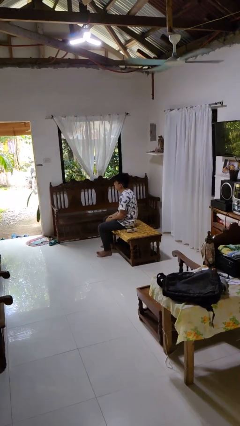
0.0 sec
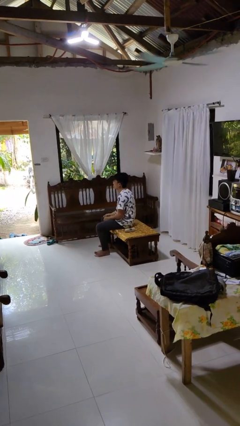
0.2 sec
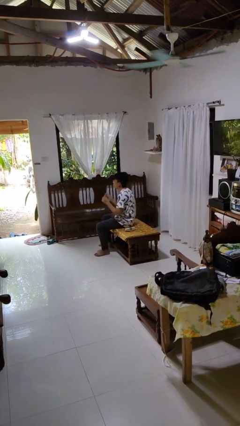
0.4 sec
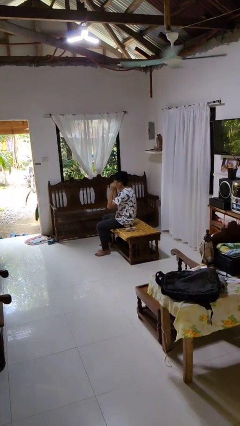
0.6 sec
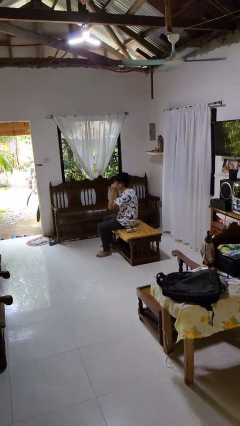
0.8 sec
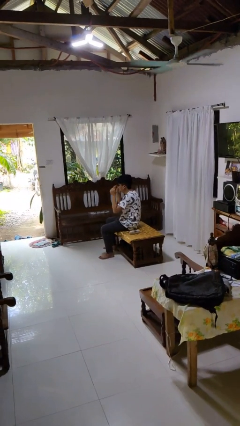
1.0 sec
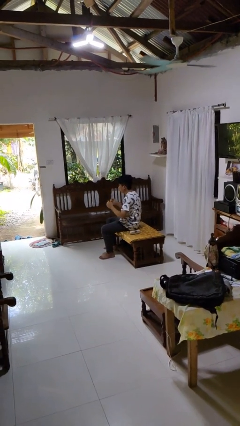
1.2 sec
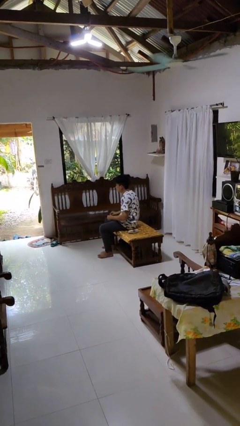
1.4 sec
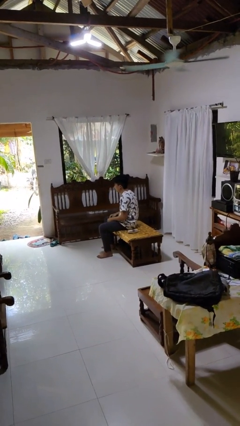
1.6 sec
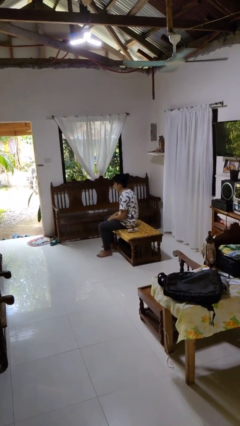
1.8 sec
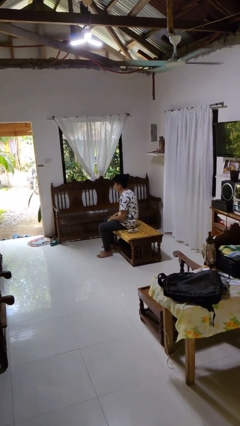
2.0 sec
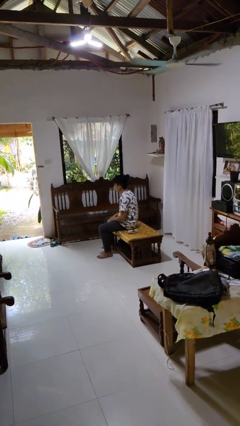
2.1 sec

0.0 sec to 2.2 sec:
person takes off glasses

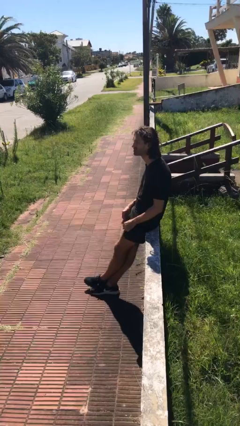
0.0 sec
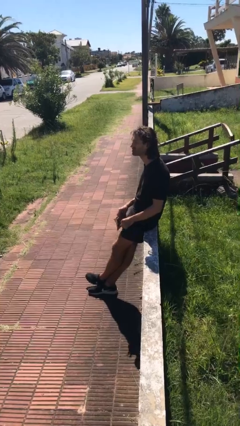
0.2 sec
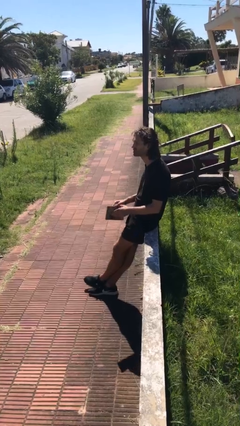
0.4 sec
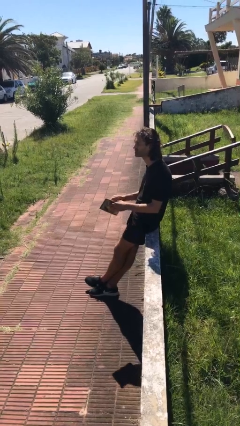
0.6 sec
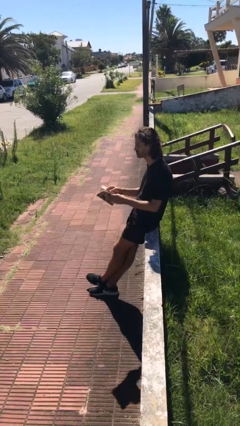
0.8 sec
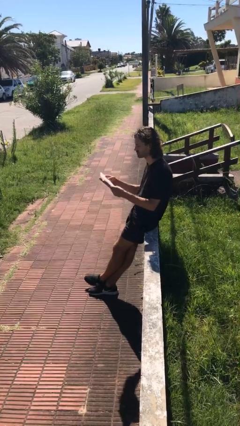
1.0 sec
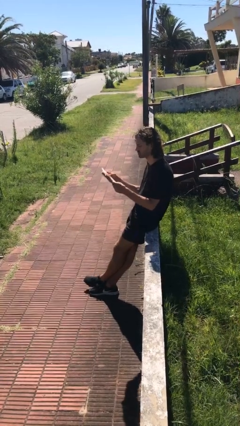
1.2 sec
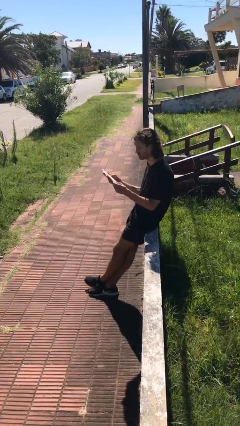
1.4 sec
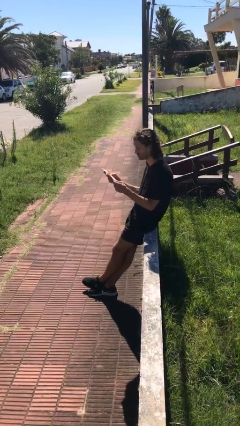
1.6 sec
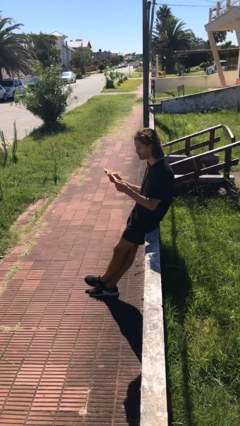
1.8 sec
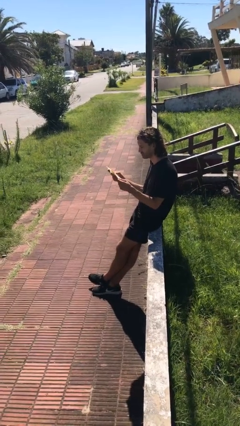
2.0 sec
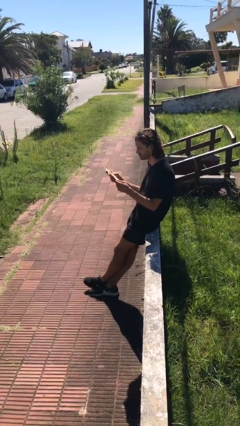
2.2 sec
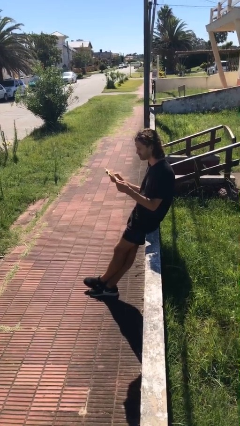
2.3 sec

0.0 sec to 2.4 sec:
person reads document

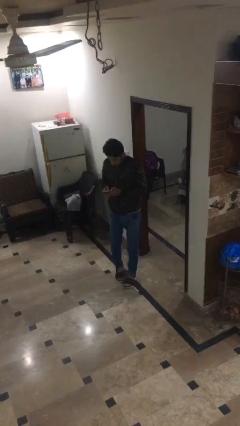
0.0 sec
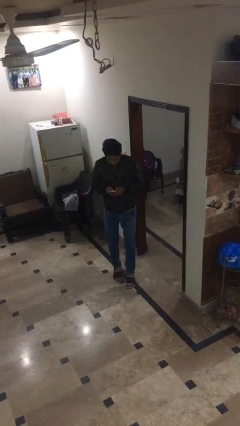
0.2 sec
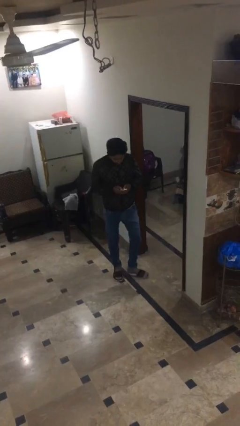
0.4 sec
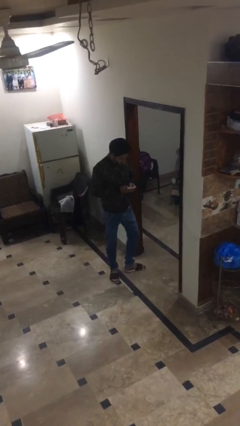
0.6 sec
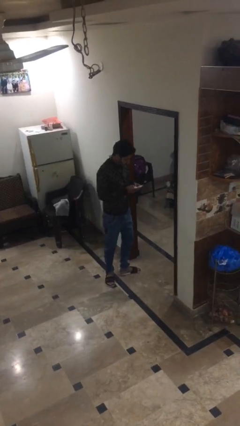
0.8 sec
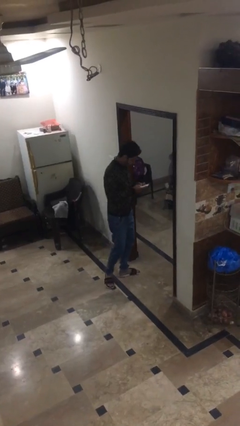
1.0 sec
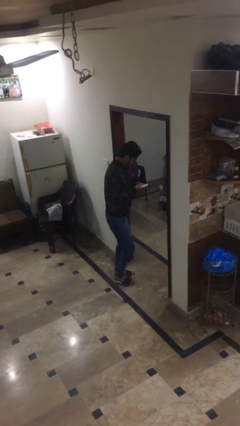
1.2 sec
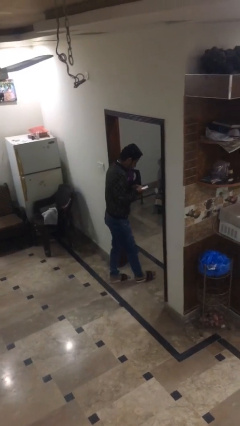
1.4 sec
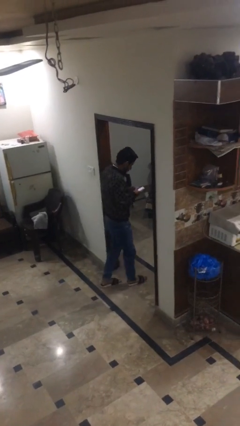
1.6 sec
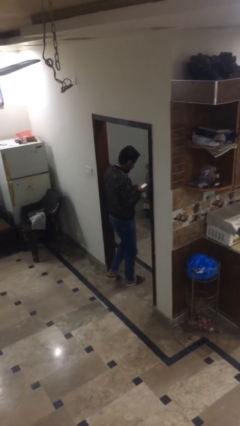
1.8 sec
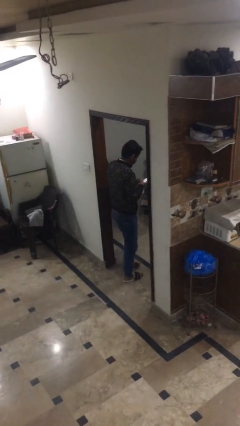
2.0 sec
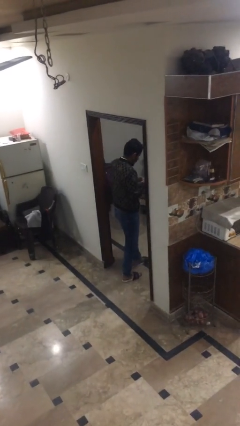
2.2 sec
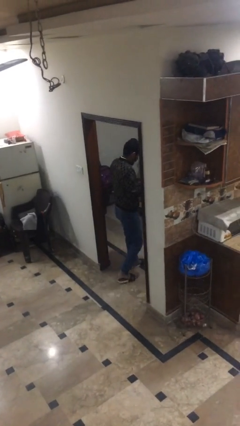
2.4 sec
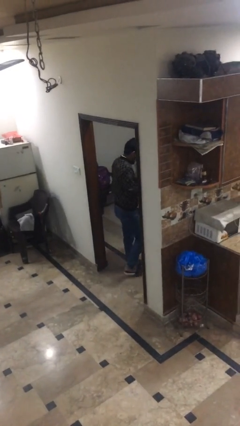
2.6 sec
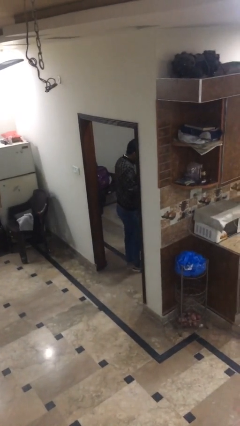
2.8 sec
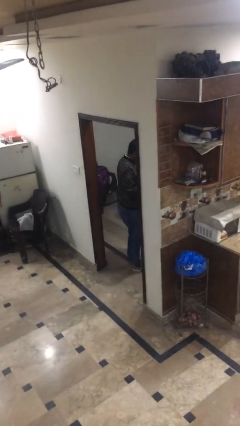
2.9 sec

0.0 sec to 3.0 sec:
person enters scene through structure

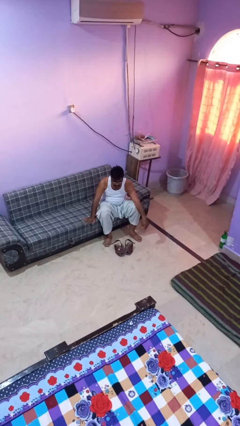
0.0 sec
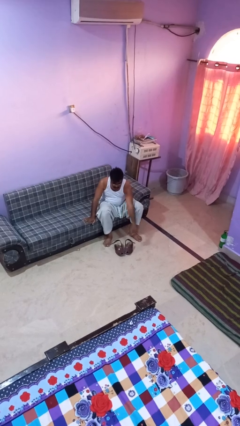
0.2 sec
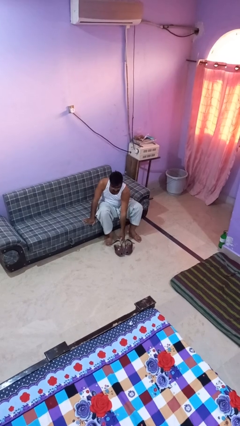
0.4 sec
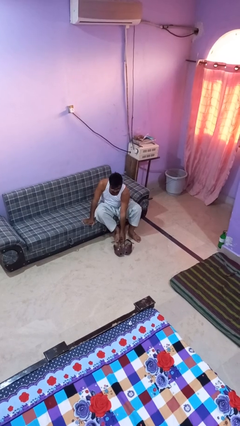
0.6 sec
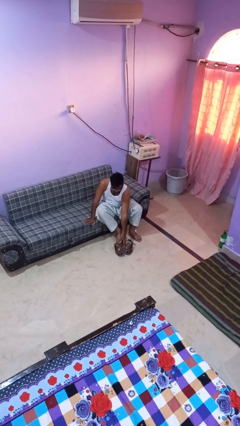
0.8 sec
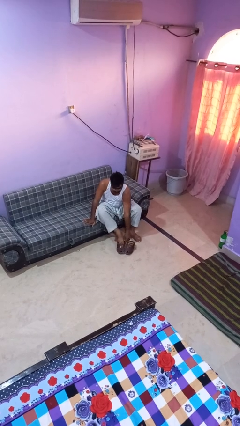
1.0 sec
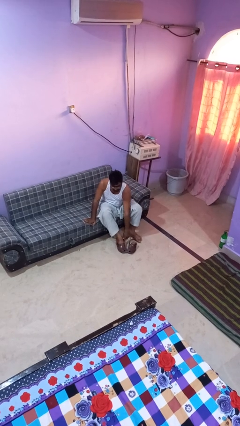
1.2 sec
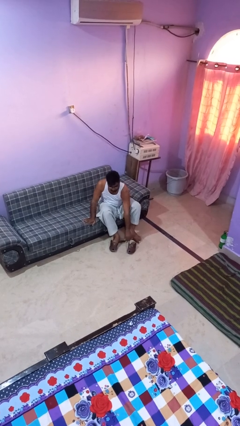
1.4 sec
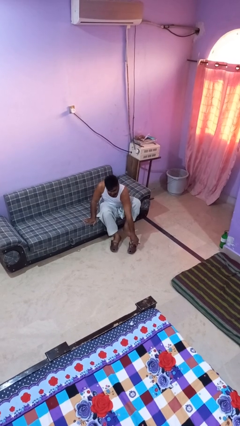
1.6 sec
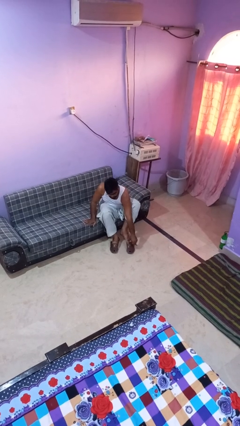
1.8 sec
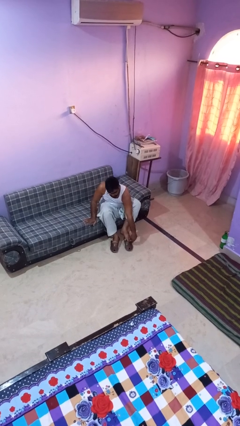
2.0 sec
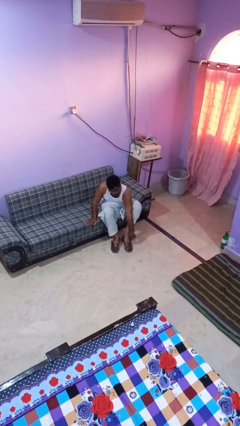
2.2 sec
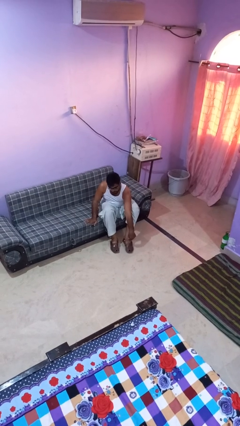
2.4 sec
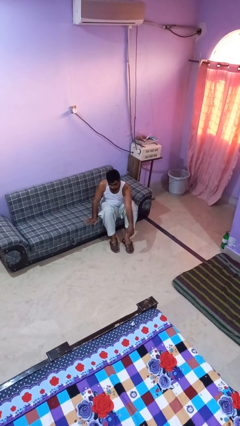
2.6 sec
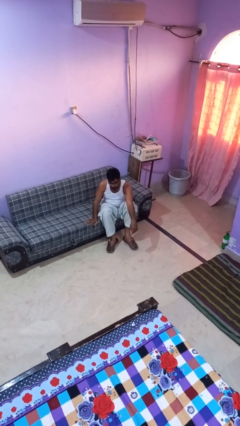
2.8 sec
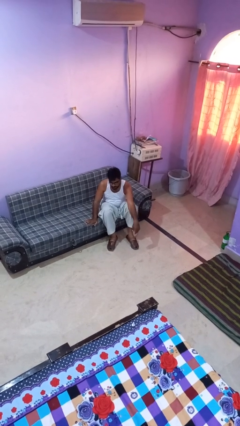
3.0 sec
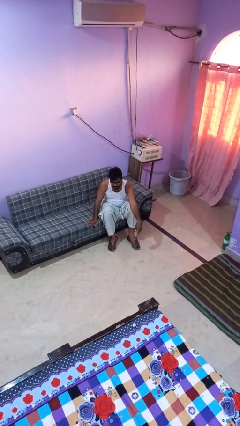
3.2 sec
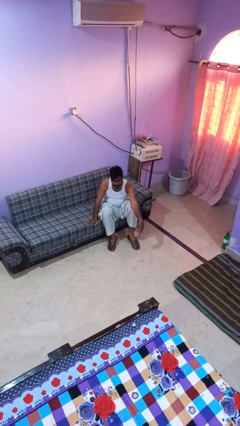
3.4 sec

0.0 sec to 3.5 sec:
person puts on shoes

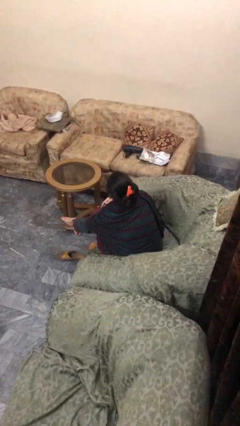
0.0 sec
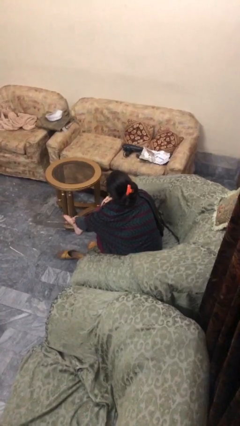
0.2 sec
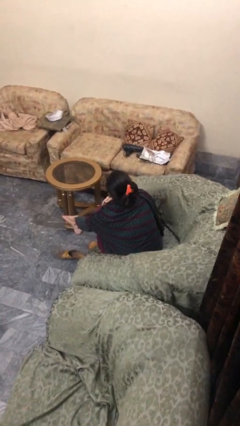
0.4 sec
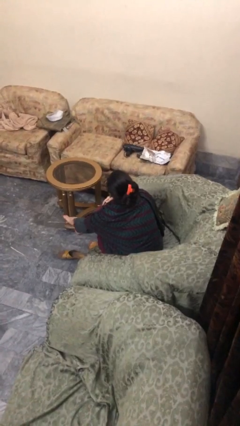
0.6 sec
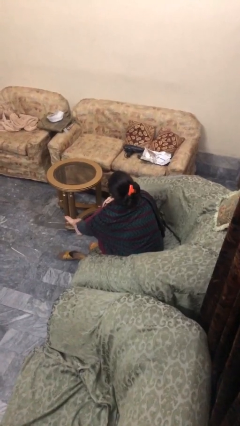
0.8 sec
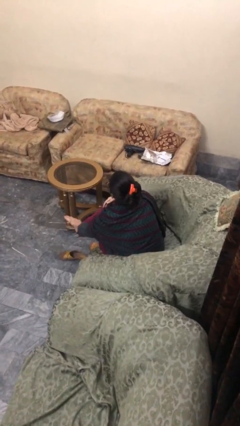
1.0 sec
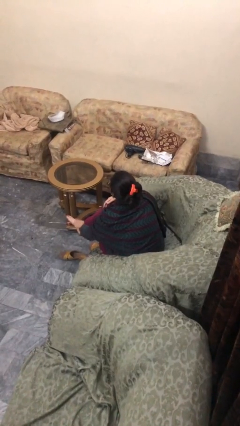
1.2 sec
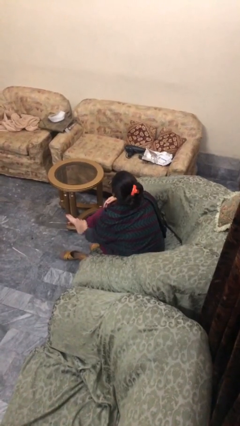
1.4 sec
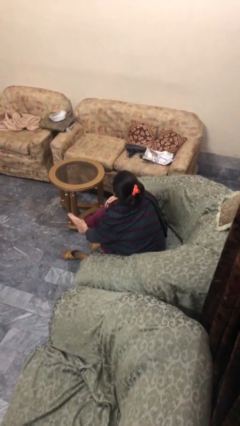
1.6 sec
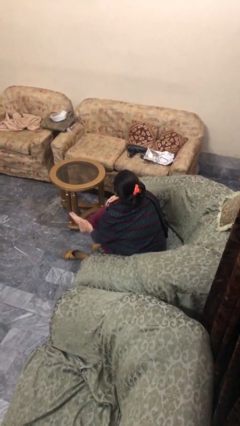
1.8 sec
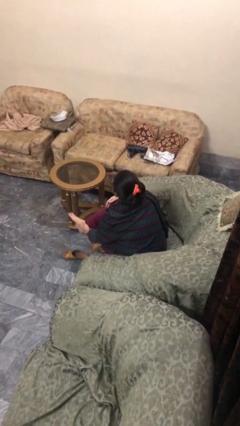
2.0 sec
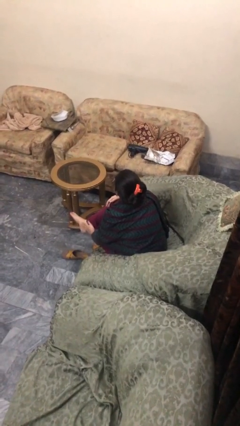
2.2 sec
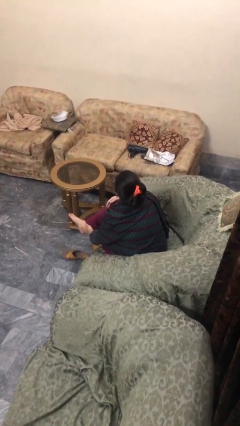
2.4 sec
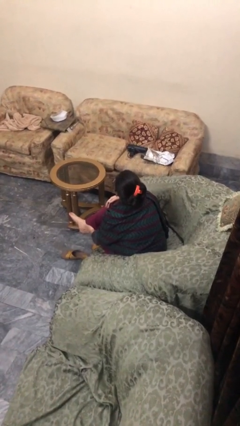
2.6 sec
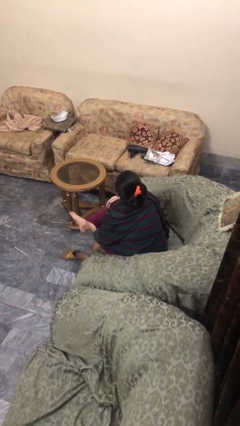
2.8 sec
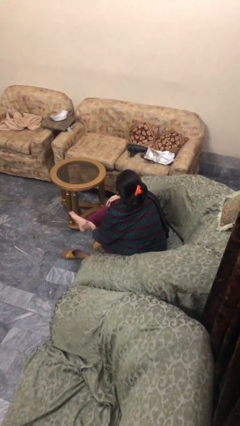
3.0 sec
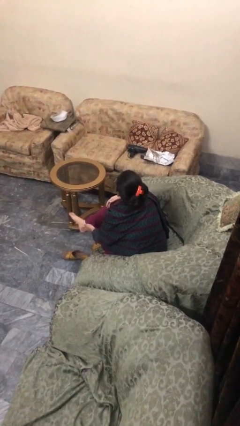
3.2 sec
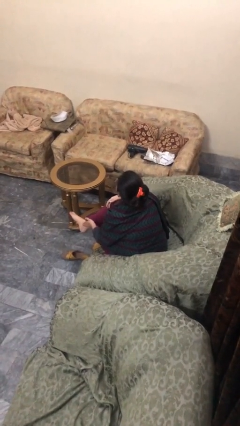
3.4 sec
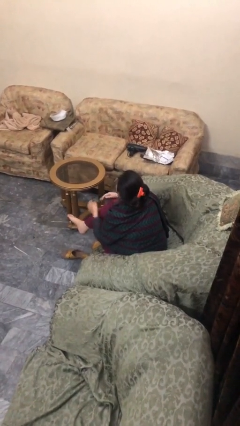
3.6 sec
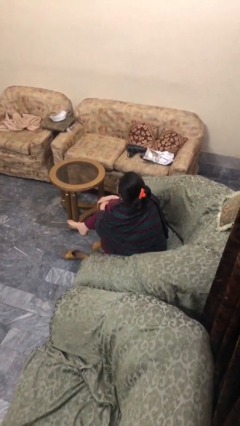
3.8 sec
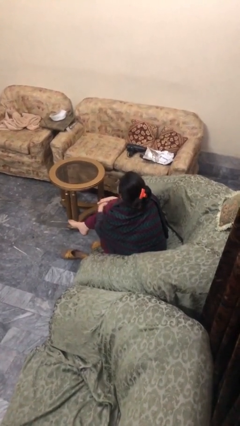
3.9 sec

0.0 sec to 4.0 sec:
person rubs foot

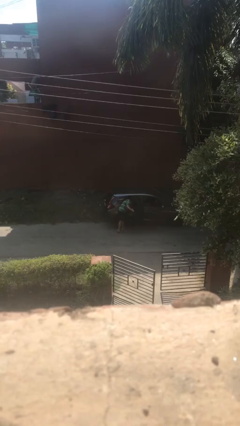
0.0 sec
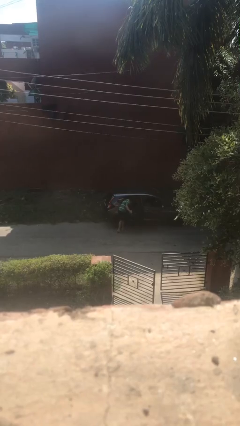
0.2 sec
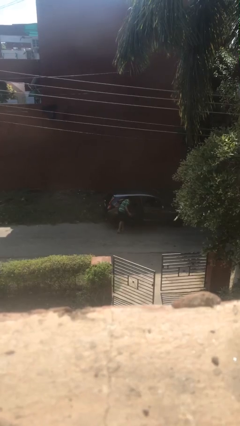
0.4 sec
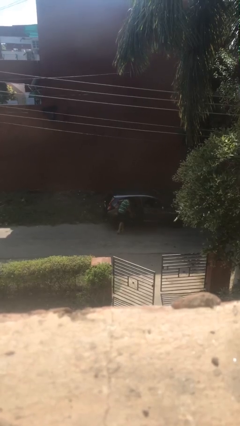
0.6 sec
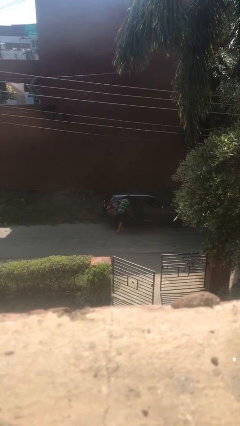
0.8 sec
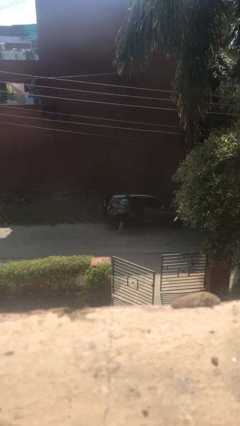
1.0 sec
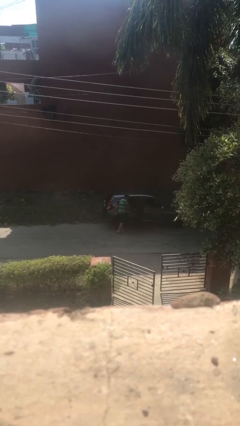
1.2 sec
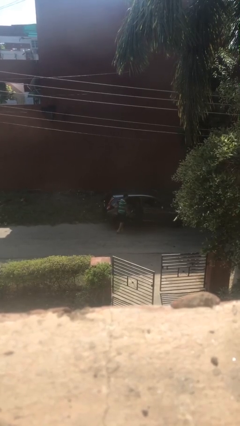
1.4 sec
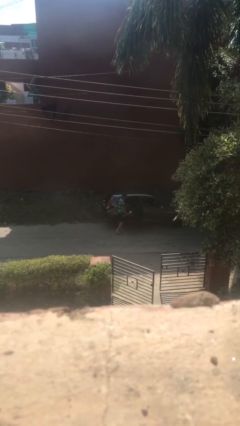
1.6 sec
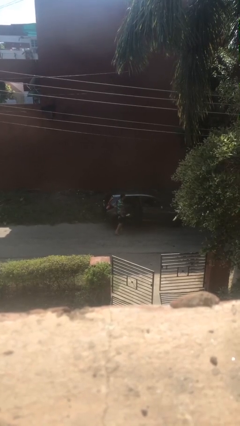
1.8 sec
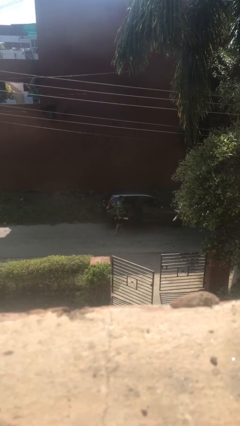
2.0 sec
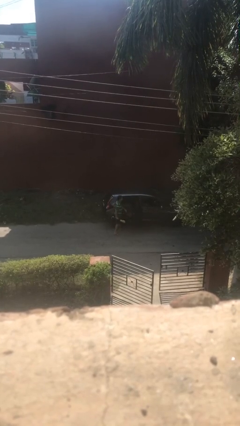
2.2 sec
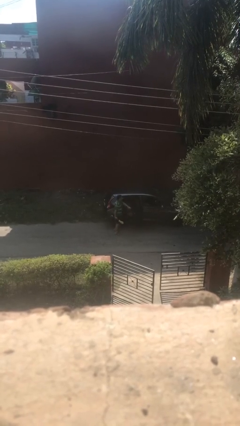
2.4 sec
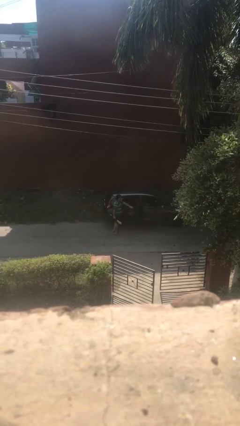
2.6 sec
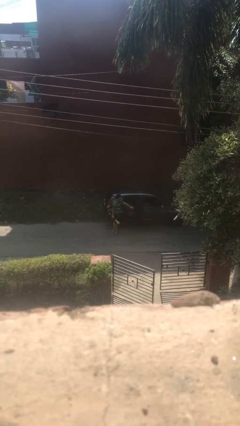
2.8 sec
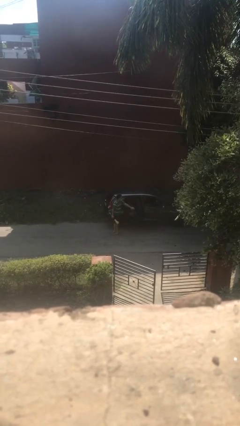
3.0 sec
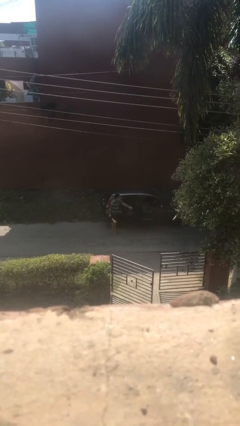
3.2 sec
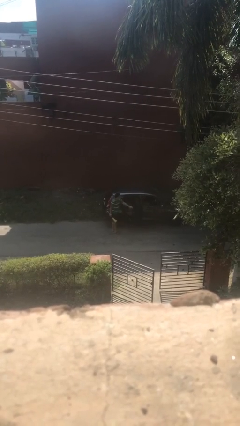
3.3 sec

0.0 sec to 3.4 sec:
person unloads car
